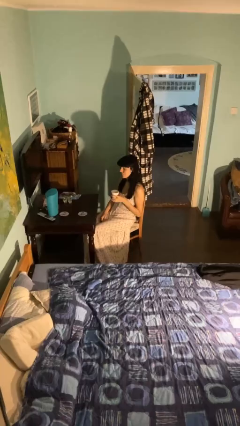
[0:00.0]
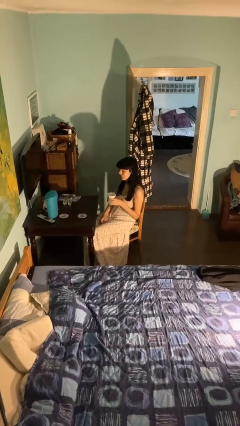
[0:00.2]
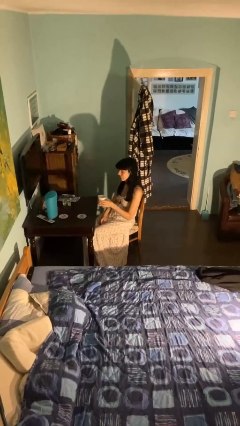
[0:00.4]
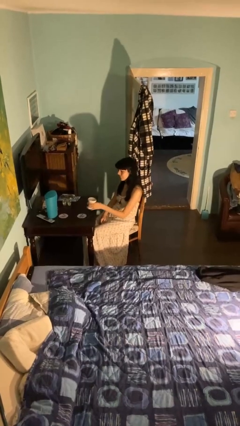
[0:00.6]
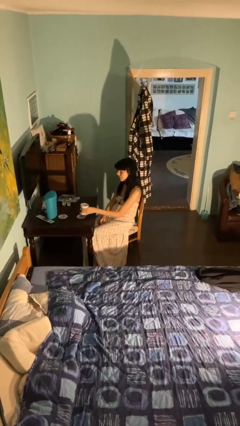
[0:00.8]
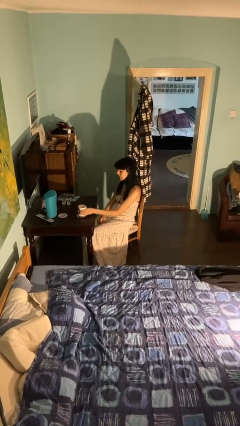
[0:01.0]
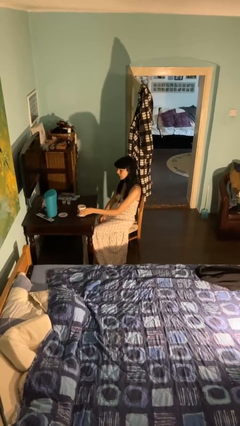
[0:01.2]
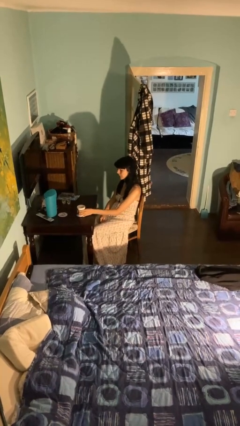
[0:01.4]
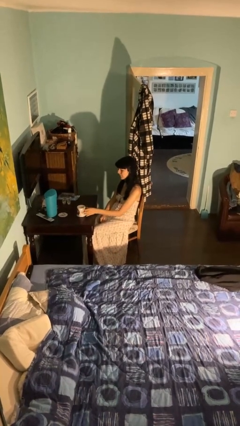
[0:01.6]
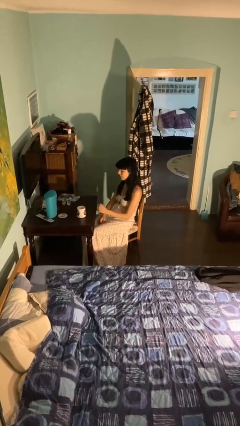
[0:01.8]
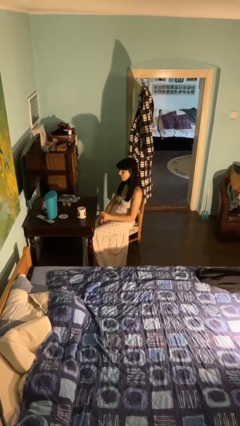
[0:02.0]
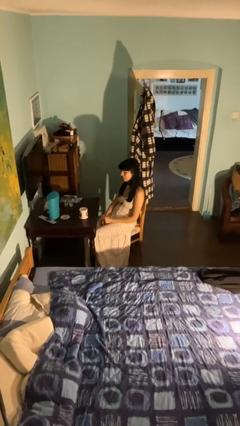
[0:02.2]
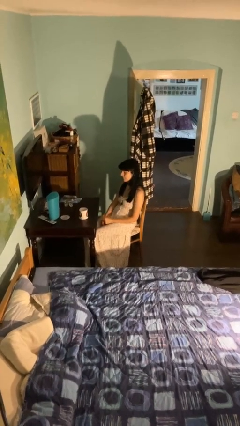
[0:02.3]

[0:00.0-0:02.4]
person puts down object on table

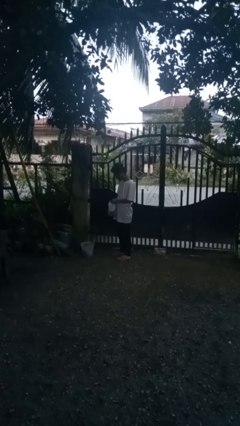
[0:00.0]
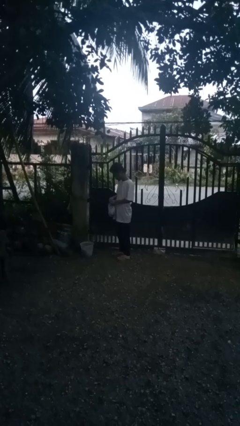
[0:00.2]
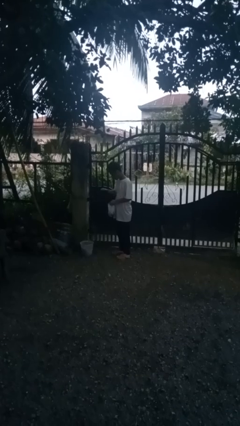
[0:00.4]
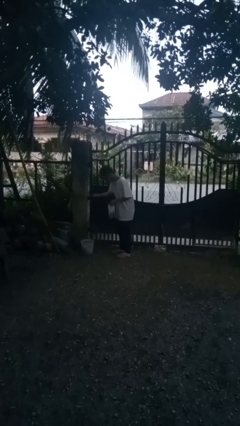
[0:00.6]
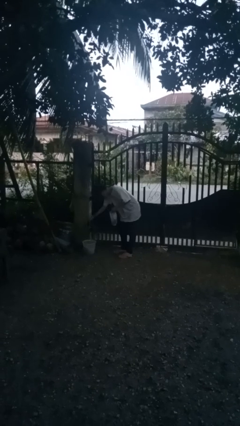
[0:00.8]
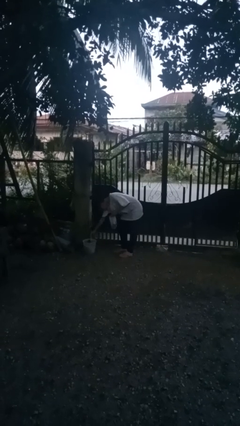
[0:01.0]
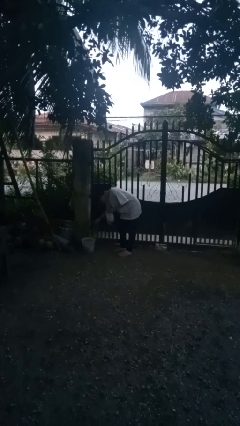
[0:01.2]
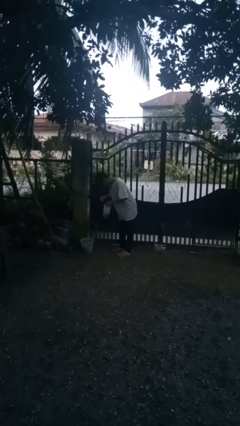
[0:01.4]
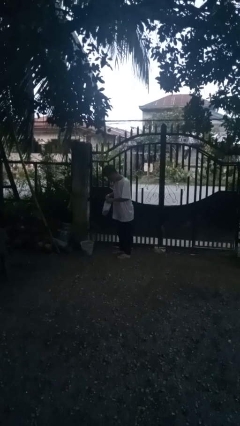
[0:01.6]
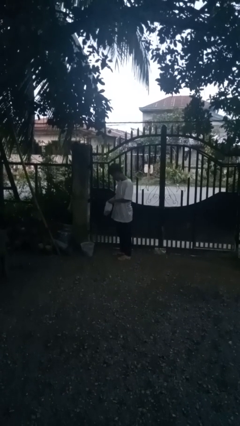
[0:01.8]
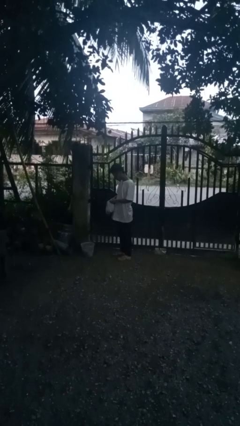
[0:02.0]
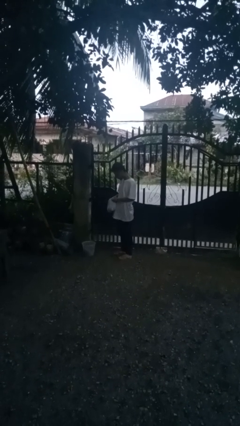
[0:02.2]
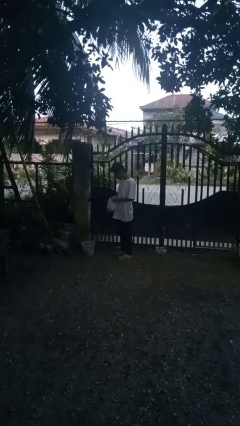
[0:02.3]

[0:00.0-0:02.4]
person discards trash

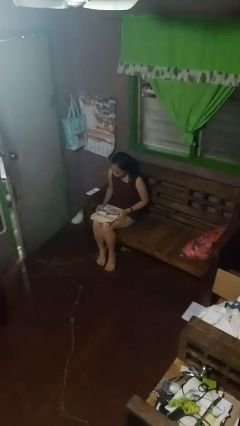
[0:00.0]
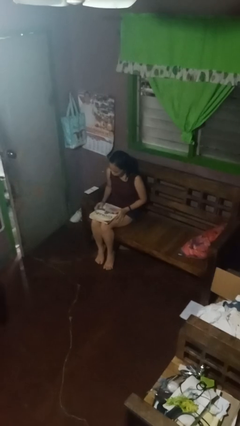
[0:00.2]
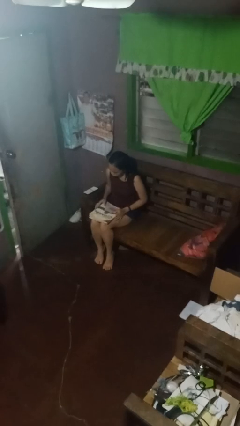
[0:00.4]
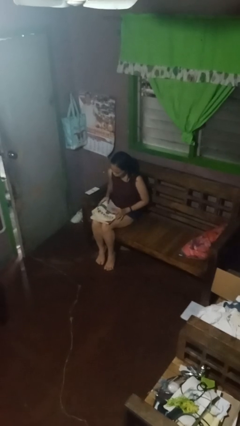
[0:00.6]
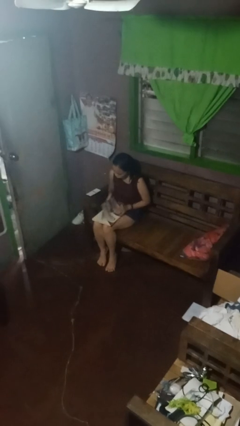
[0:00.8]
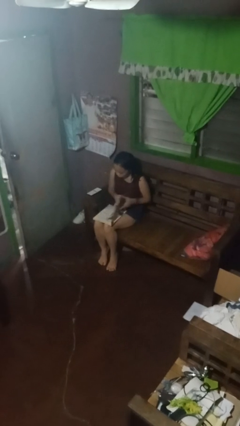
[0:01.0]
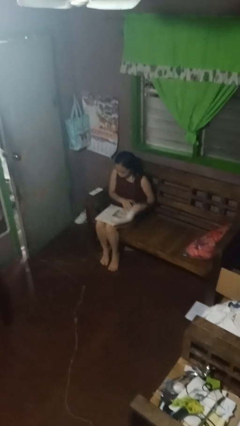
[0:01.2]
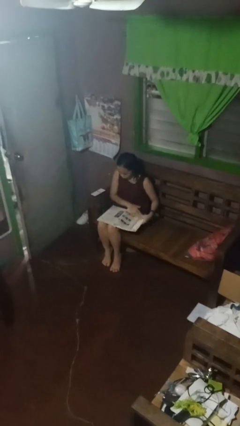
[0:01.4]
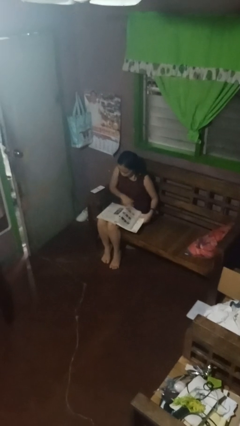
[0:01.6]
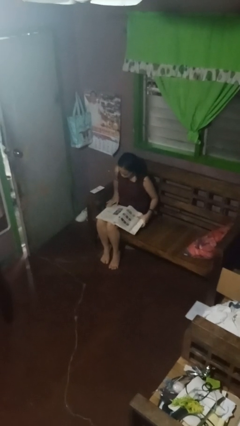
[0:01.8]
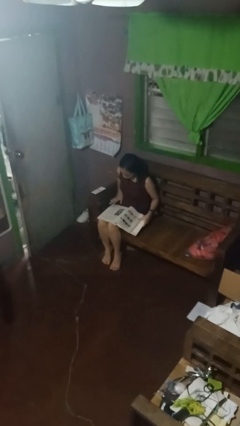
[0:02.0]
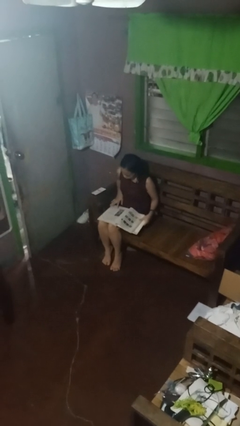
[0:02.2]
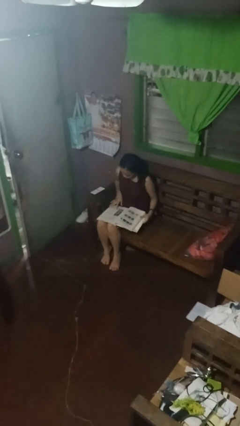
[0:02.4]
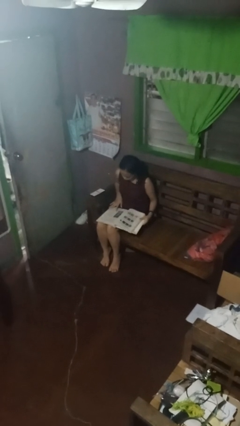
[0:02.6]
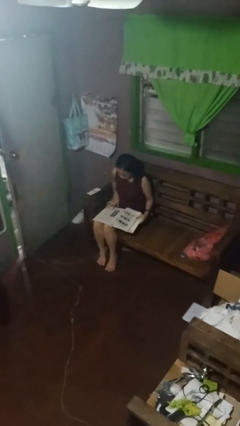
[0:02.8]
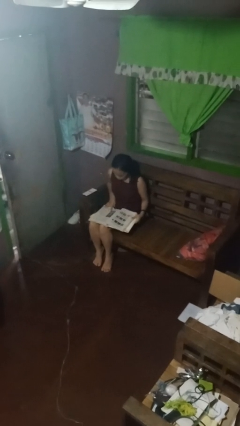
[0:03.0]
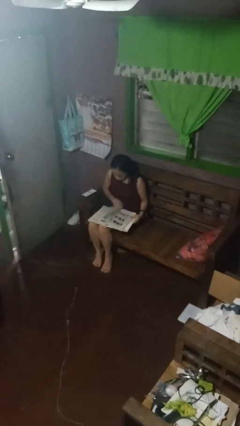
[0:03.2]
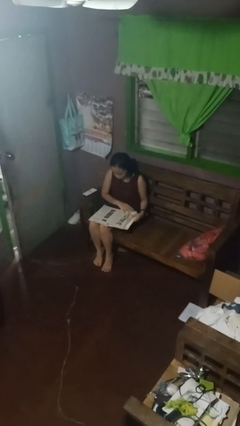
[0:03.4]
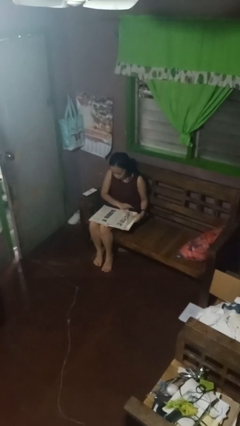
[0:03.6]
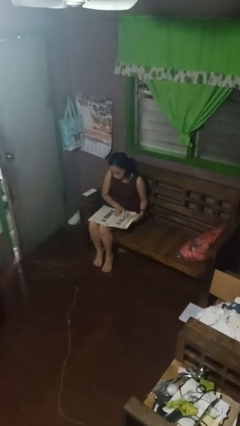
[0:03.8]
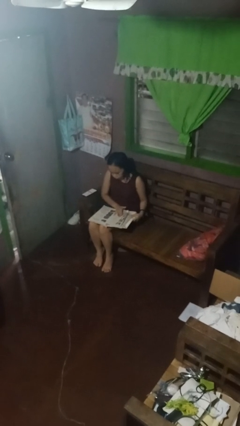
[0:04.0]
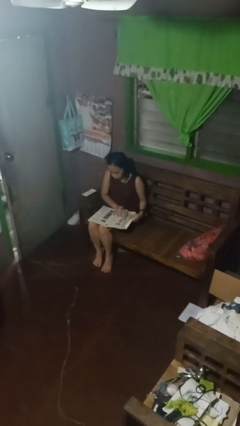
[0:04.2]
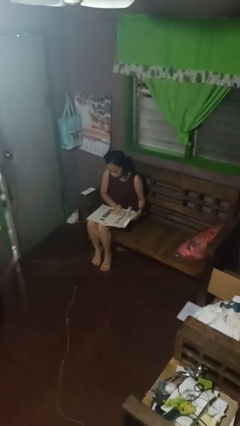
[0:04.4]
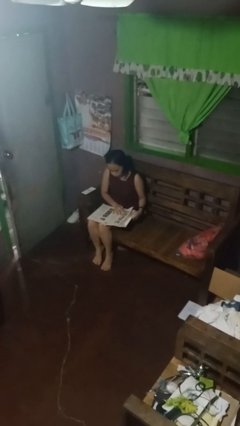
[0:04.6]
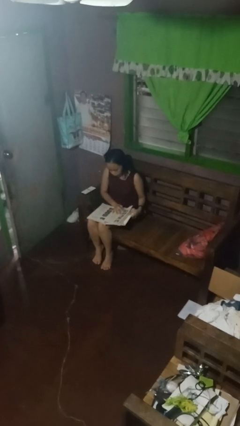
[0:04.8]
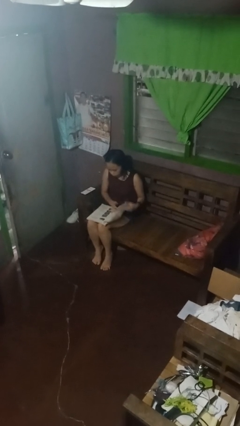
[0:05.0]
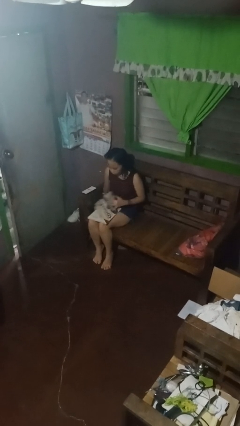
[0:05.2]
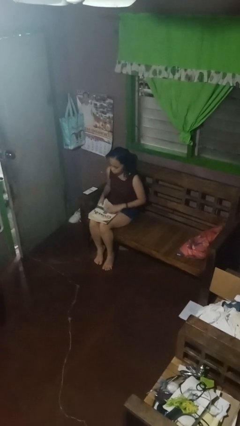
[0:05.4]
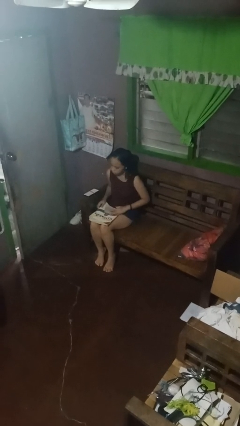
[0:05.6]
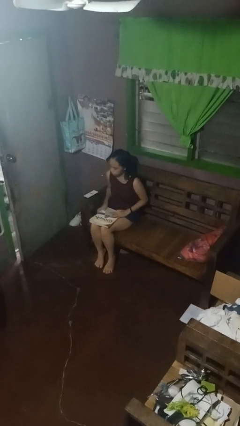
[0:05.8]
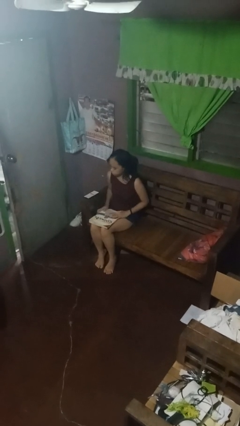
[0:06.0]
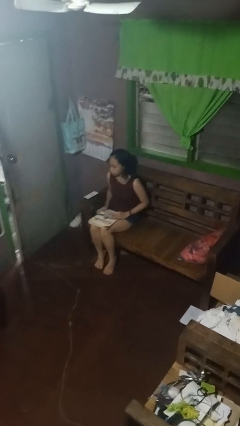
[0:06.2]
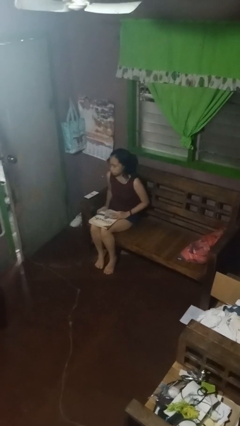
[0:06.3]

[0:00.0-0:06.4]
person reads book

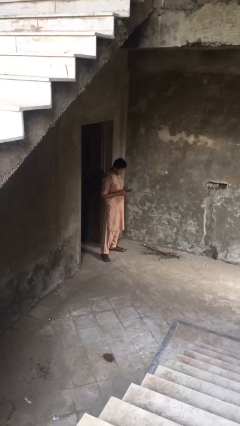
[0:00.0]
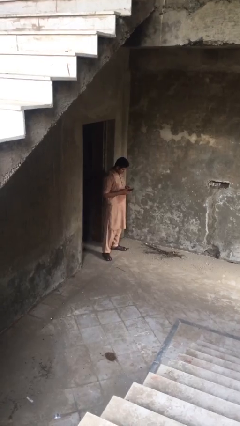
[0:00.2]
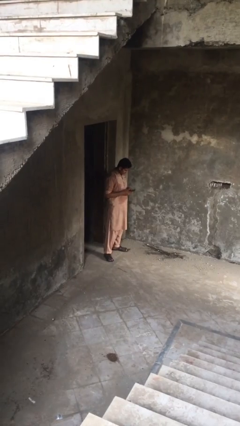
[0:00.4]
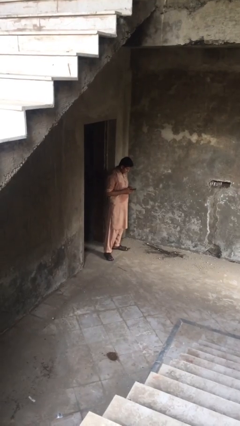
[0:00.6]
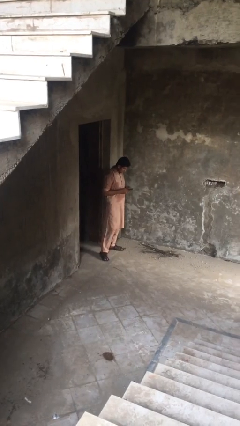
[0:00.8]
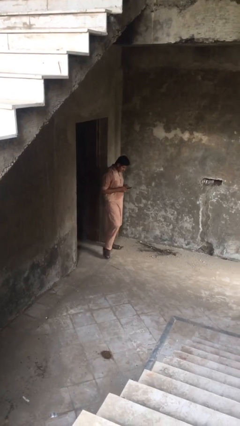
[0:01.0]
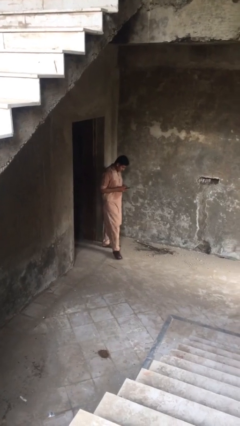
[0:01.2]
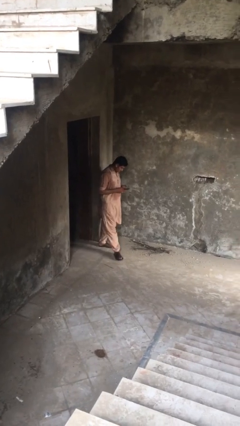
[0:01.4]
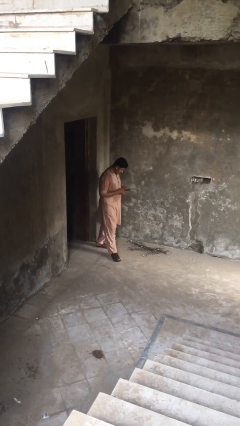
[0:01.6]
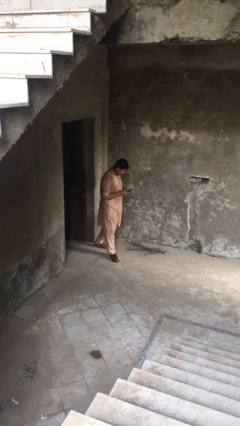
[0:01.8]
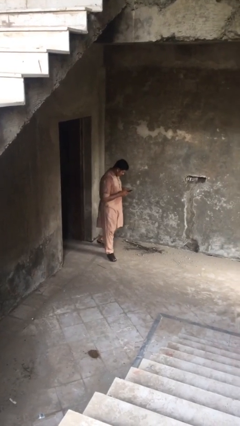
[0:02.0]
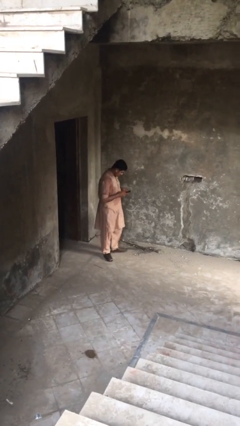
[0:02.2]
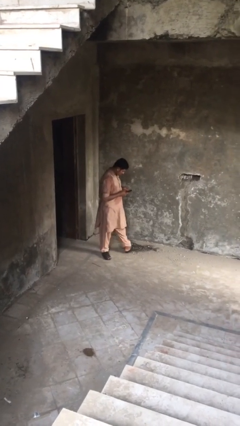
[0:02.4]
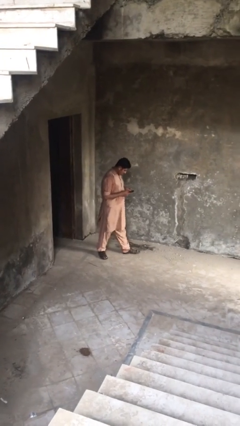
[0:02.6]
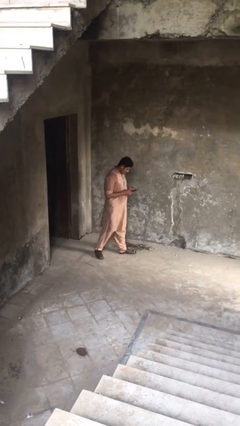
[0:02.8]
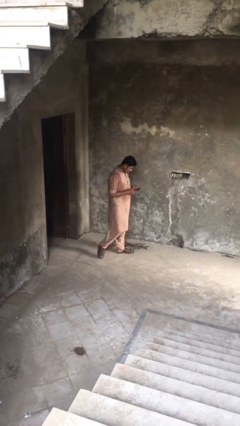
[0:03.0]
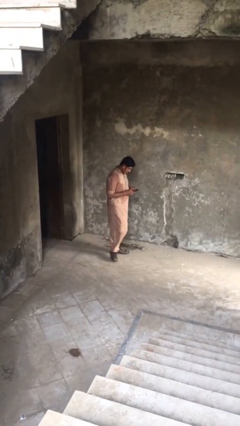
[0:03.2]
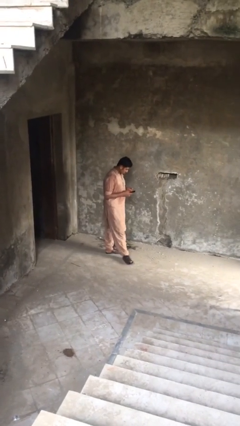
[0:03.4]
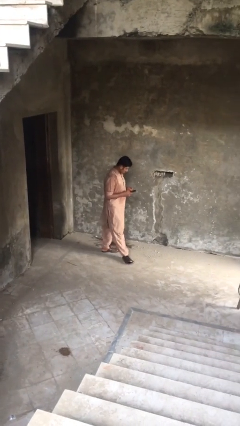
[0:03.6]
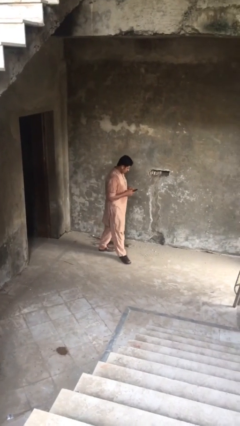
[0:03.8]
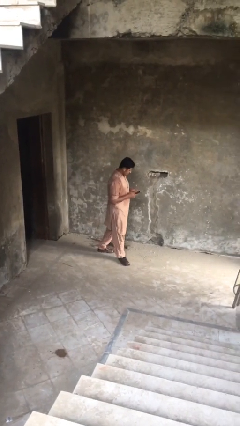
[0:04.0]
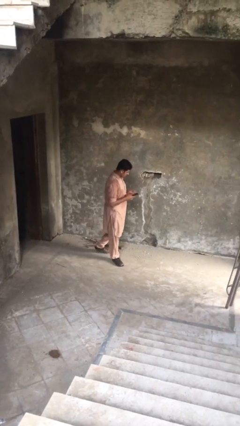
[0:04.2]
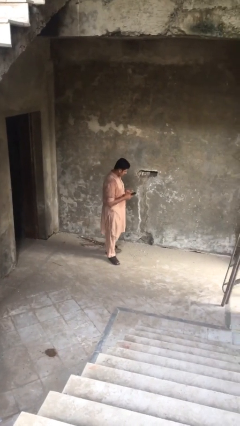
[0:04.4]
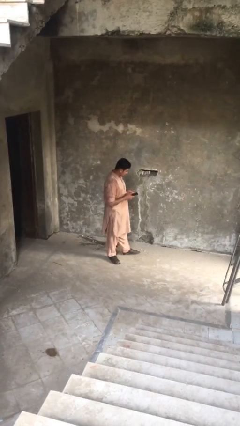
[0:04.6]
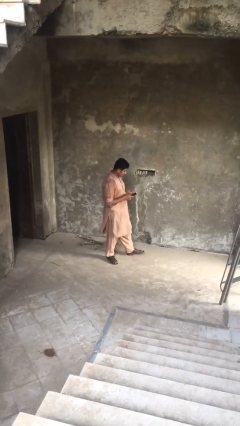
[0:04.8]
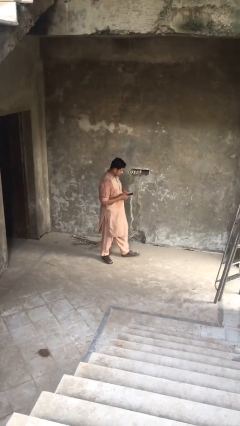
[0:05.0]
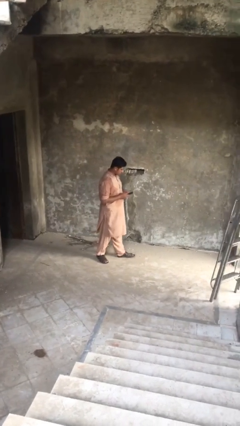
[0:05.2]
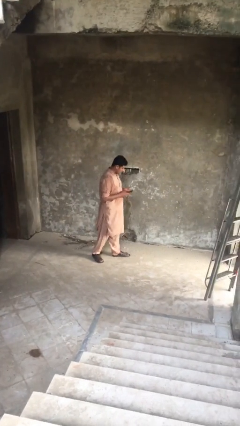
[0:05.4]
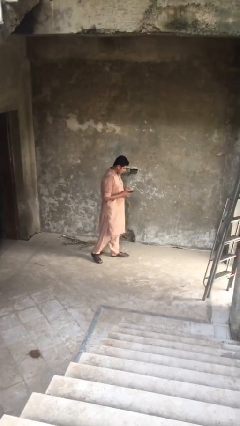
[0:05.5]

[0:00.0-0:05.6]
person texts on phone

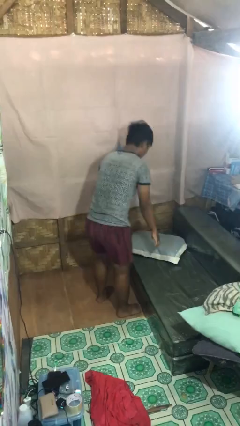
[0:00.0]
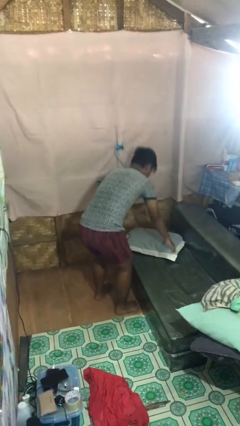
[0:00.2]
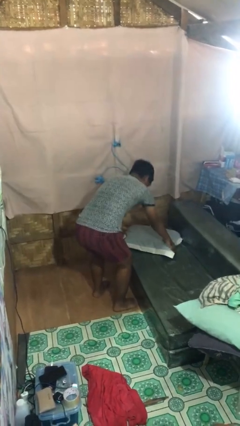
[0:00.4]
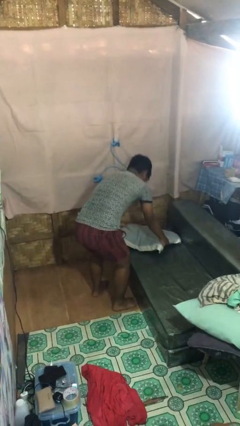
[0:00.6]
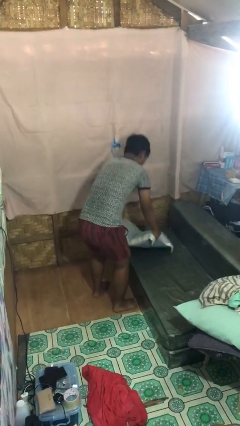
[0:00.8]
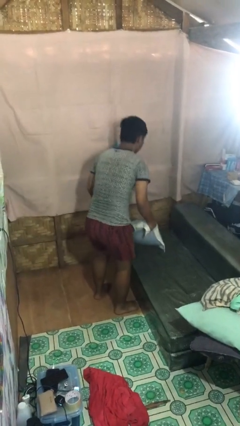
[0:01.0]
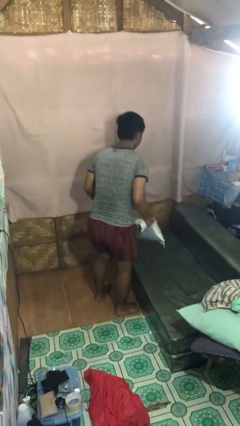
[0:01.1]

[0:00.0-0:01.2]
person picks up object from couch
